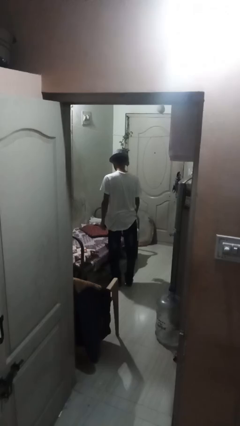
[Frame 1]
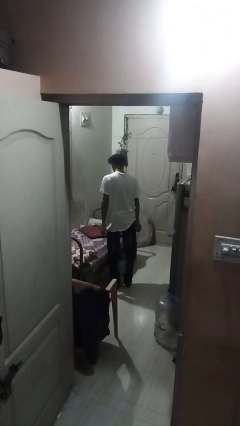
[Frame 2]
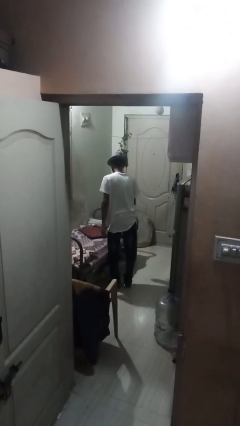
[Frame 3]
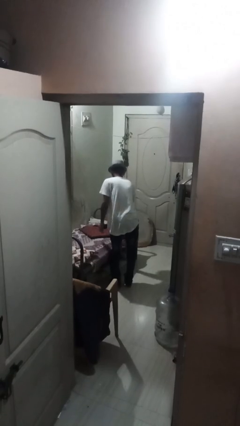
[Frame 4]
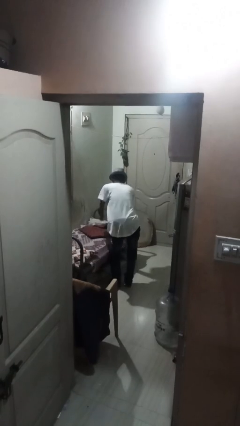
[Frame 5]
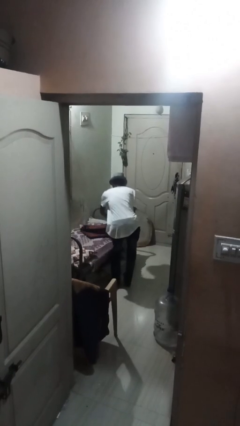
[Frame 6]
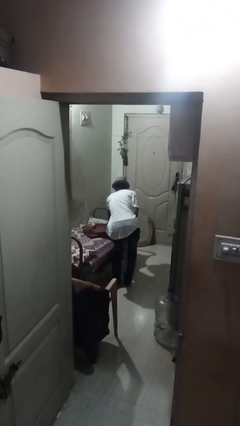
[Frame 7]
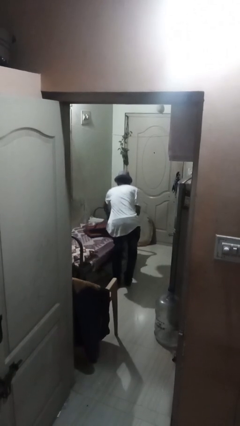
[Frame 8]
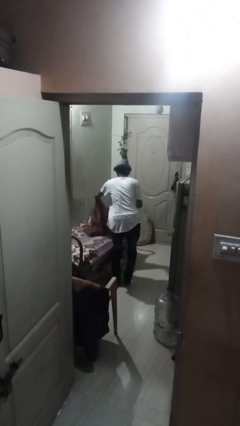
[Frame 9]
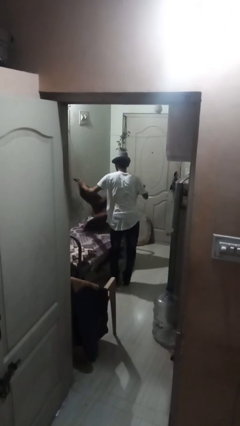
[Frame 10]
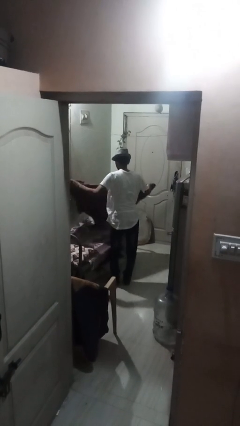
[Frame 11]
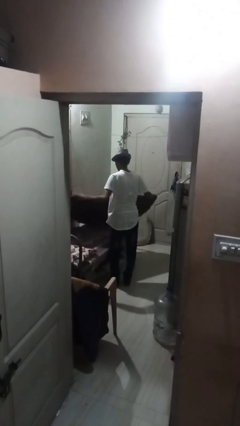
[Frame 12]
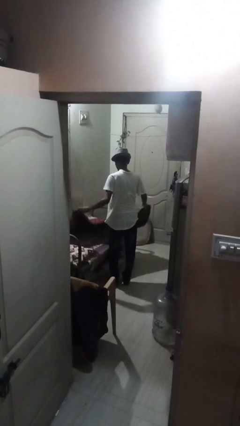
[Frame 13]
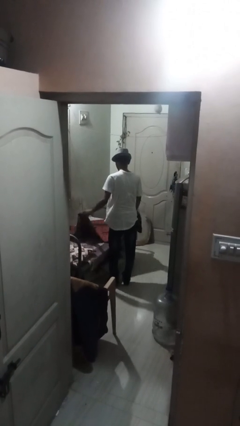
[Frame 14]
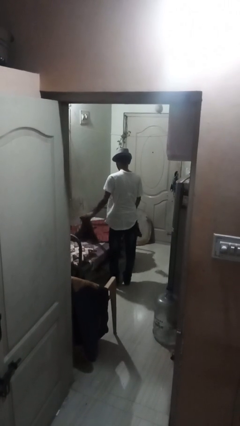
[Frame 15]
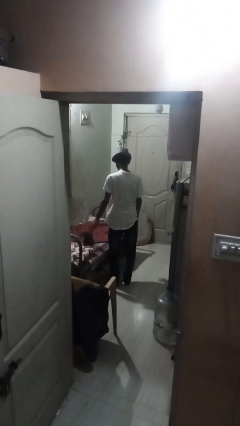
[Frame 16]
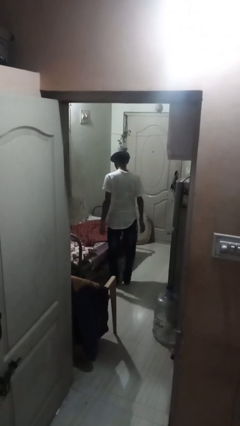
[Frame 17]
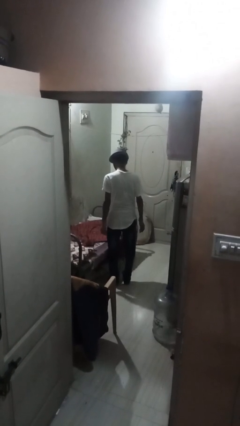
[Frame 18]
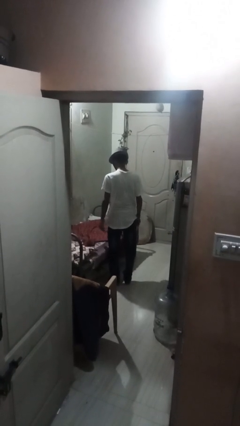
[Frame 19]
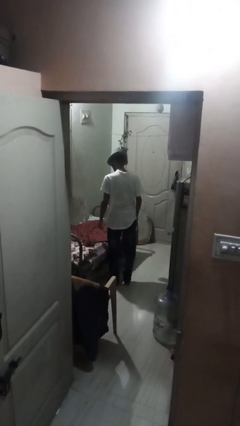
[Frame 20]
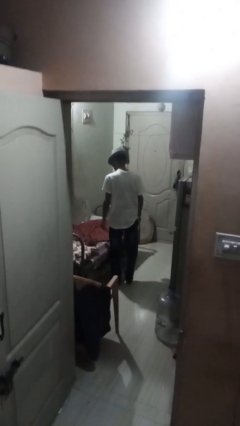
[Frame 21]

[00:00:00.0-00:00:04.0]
person unfolds blanket

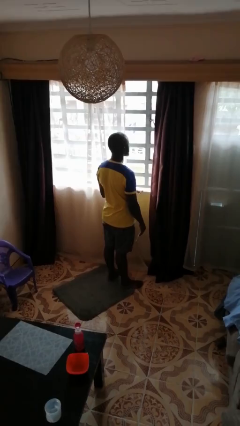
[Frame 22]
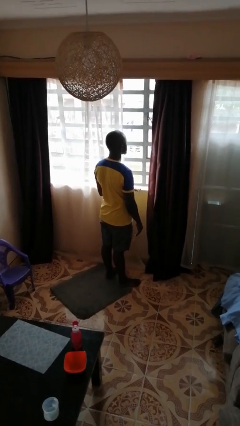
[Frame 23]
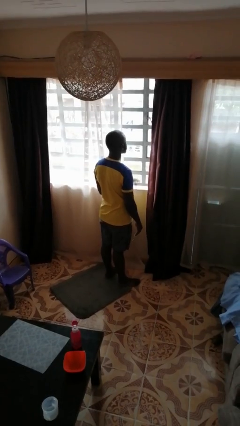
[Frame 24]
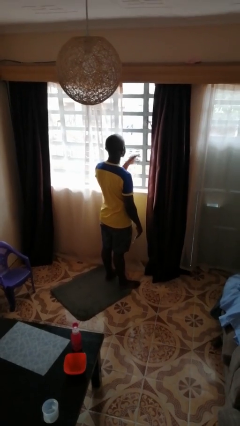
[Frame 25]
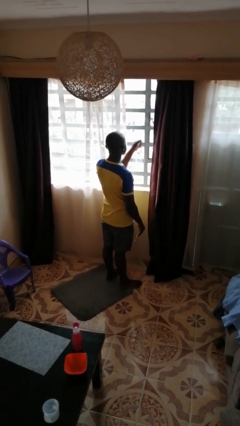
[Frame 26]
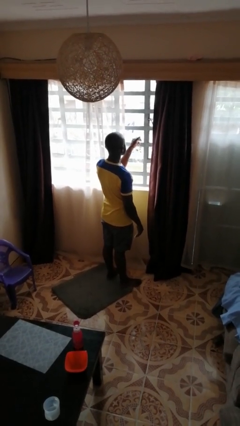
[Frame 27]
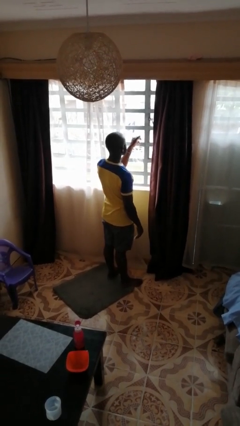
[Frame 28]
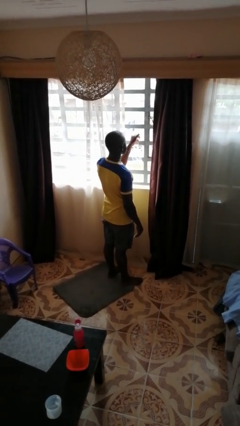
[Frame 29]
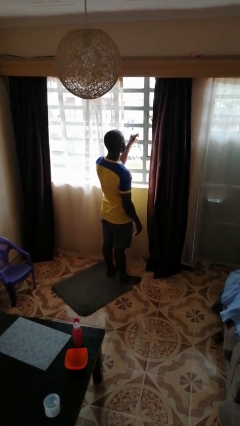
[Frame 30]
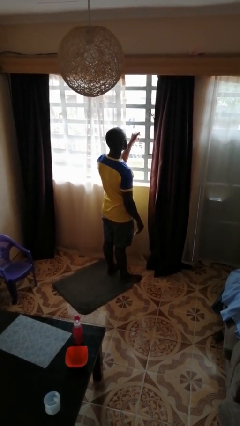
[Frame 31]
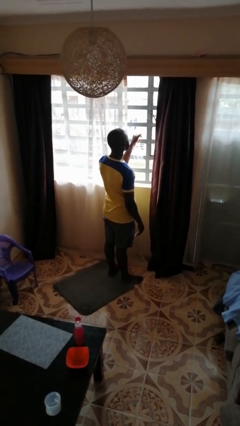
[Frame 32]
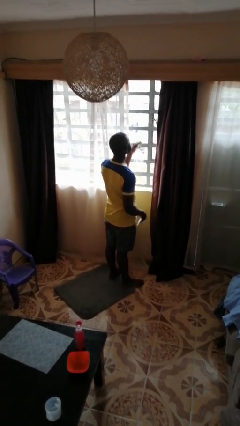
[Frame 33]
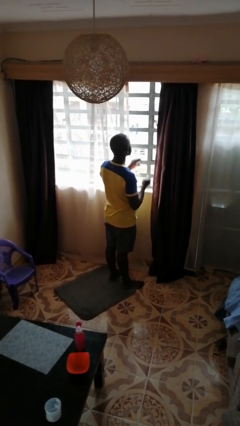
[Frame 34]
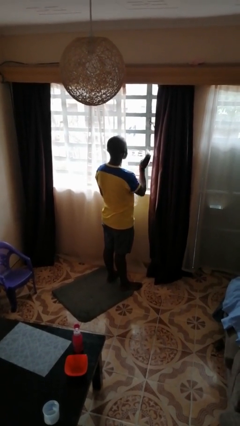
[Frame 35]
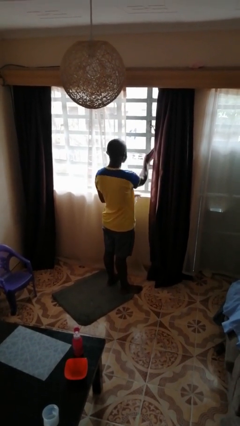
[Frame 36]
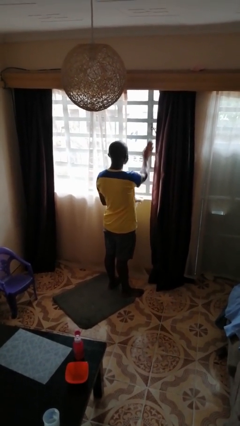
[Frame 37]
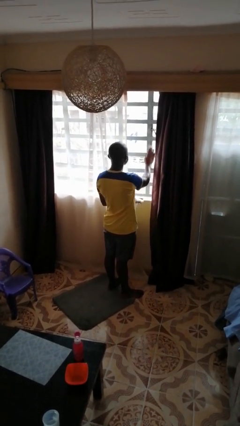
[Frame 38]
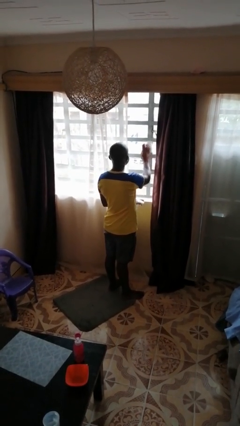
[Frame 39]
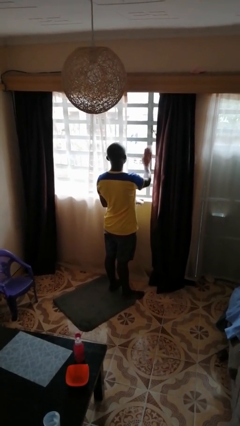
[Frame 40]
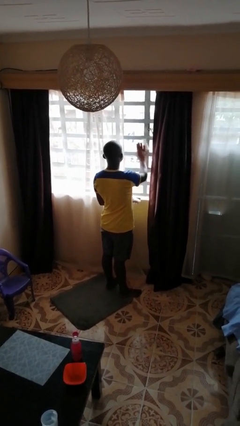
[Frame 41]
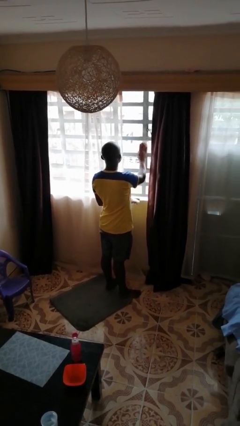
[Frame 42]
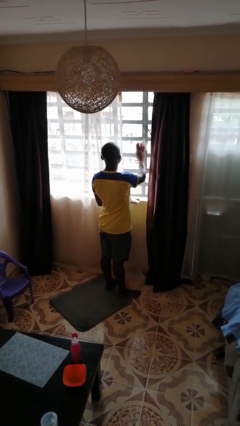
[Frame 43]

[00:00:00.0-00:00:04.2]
person sprays from bottle

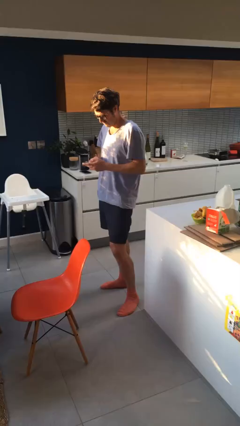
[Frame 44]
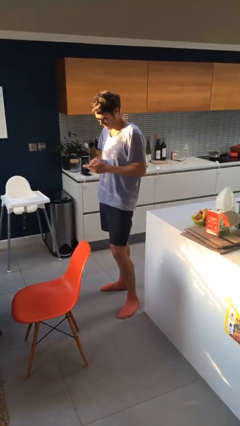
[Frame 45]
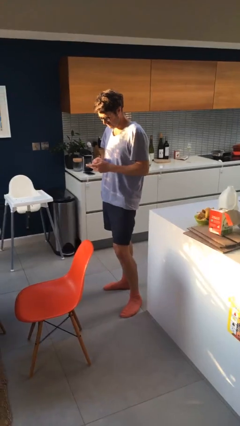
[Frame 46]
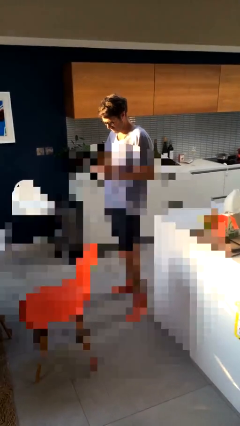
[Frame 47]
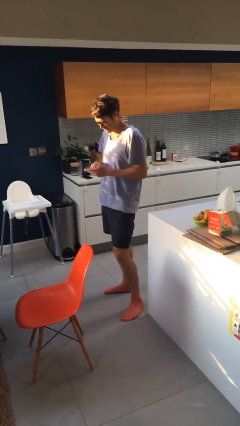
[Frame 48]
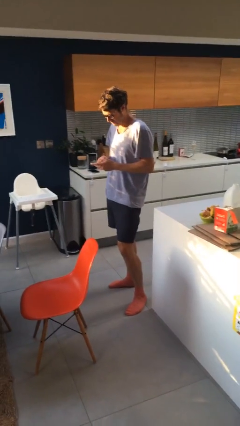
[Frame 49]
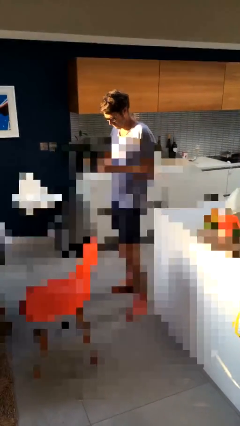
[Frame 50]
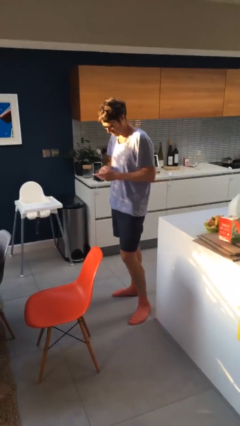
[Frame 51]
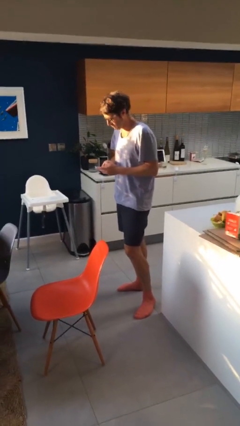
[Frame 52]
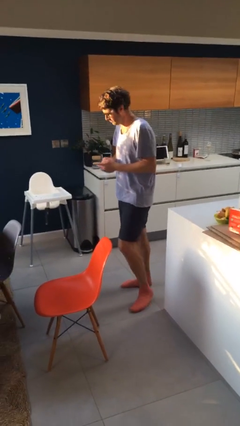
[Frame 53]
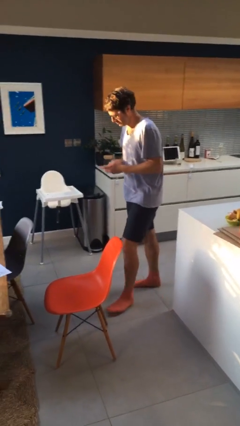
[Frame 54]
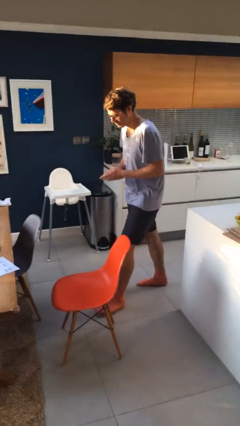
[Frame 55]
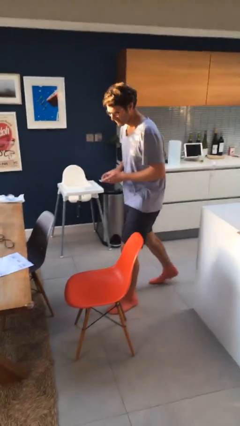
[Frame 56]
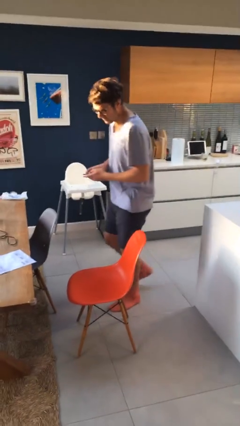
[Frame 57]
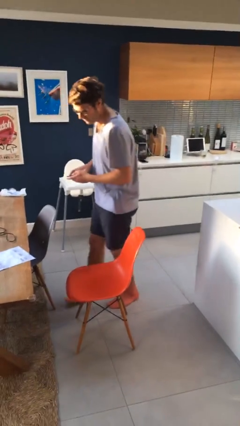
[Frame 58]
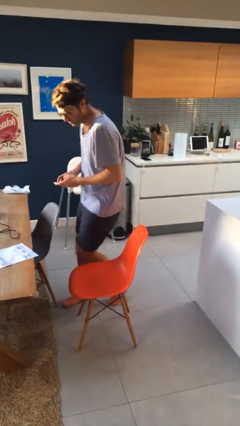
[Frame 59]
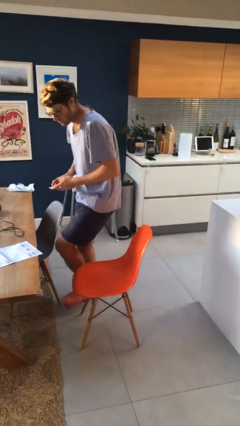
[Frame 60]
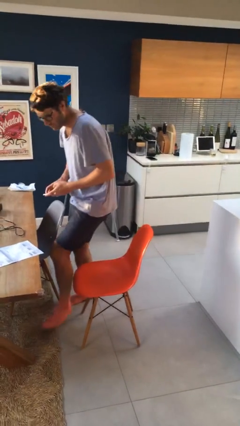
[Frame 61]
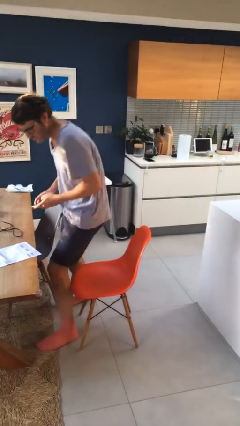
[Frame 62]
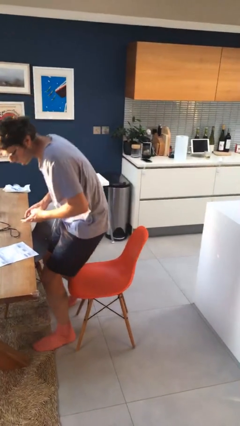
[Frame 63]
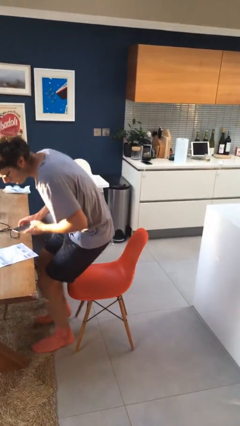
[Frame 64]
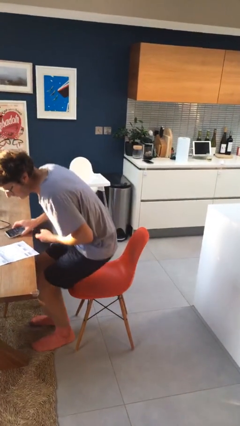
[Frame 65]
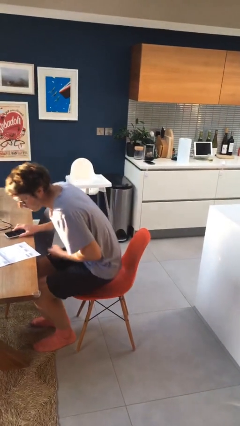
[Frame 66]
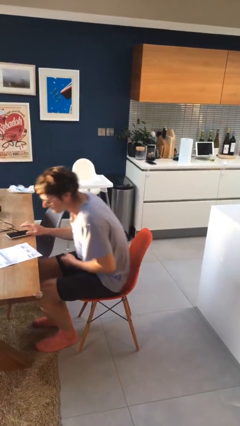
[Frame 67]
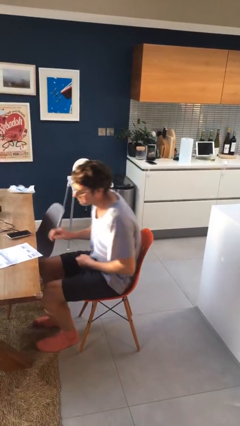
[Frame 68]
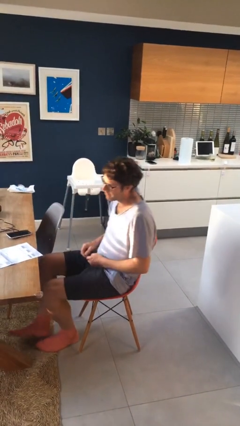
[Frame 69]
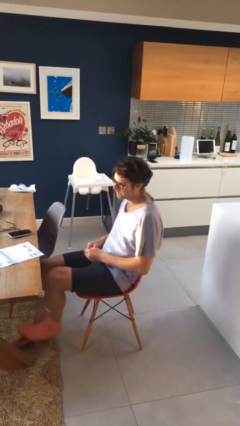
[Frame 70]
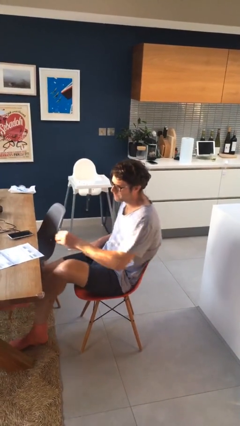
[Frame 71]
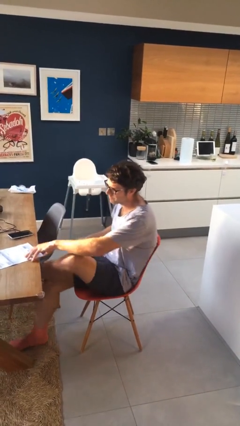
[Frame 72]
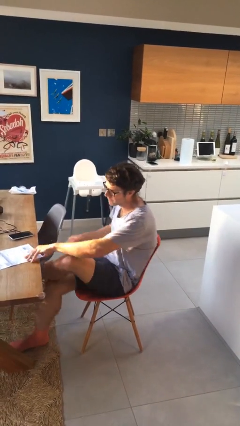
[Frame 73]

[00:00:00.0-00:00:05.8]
person sits down

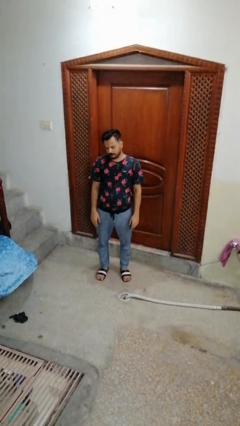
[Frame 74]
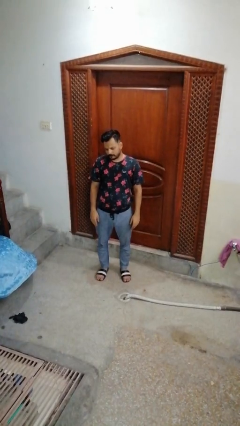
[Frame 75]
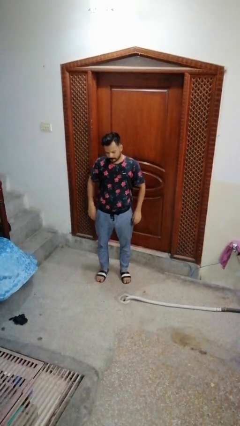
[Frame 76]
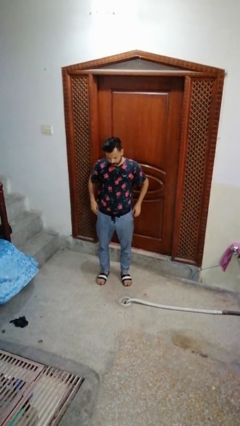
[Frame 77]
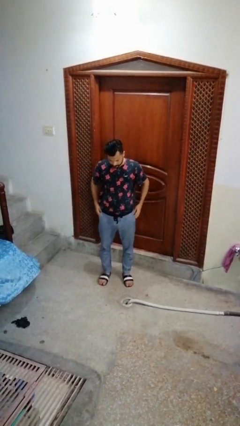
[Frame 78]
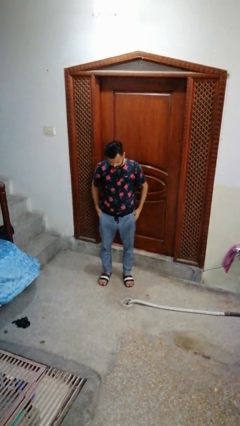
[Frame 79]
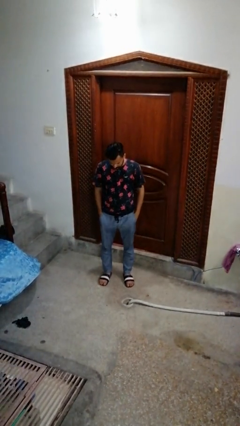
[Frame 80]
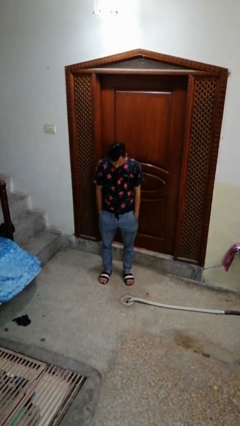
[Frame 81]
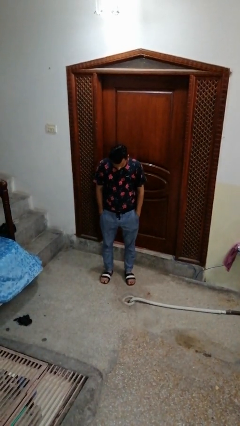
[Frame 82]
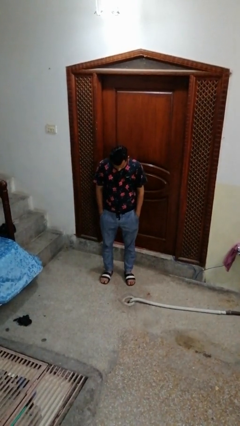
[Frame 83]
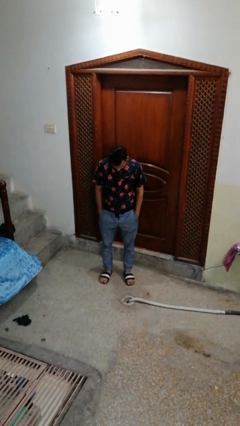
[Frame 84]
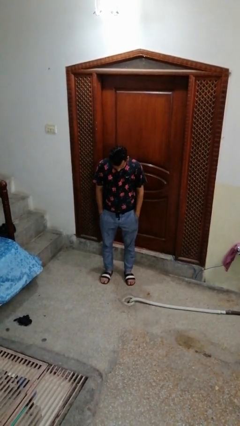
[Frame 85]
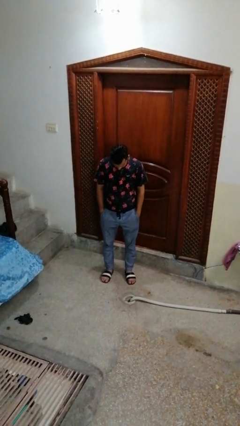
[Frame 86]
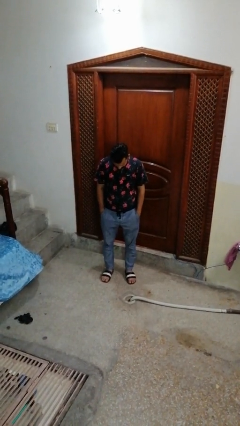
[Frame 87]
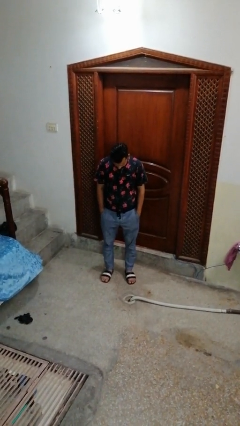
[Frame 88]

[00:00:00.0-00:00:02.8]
person puts hands in back pockets

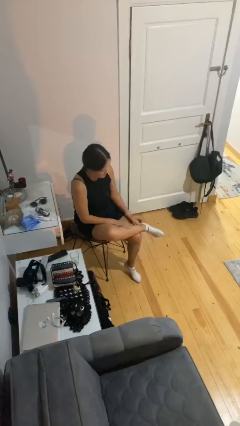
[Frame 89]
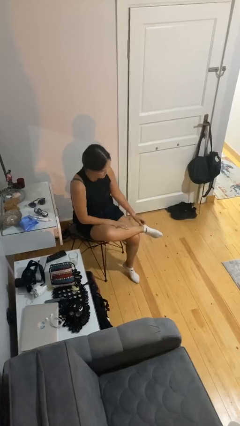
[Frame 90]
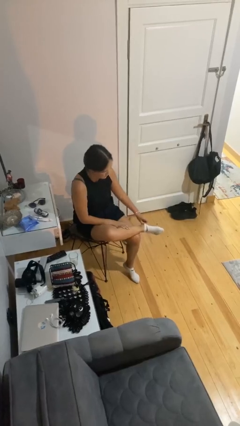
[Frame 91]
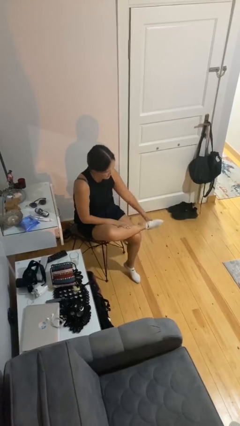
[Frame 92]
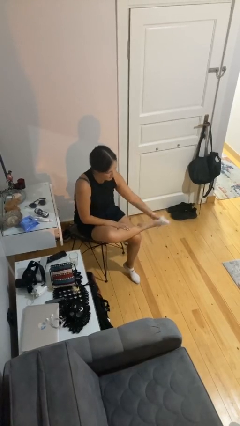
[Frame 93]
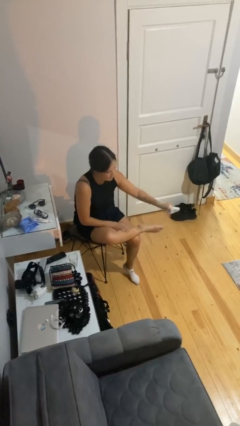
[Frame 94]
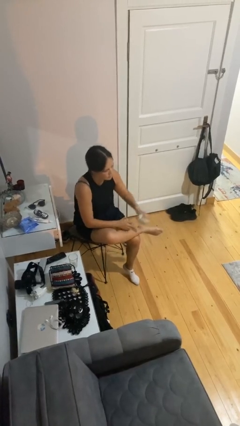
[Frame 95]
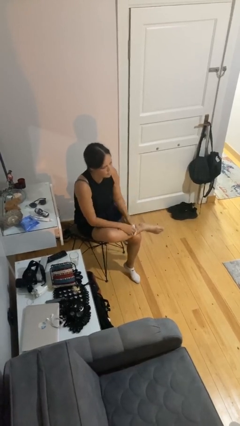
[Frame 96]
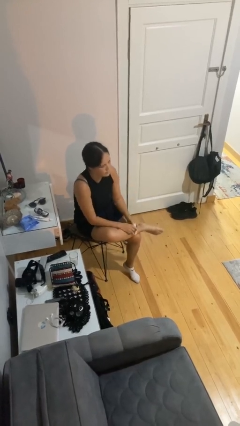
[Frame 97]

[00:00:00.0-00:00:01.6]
person takes off socks
